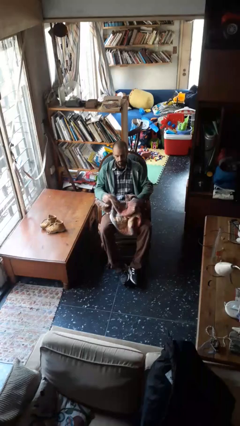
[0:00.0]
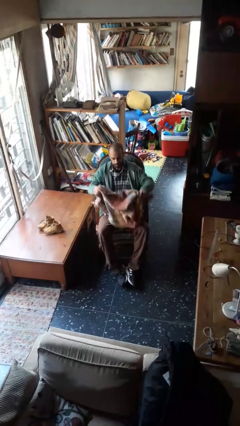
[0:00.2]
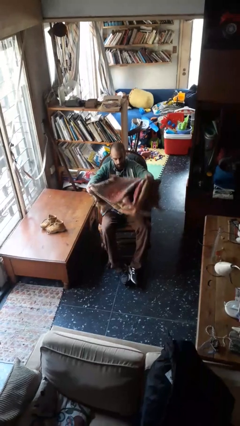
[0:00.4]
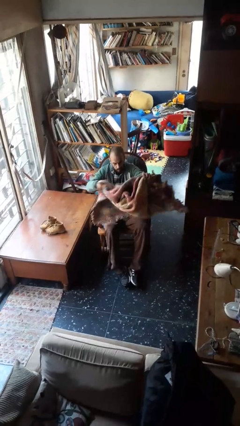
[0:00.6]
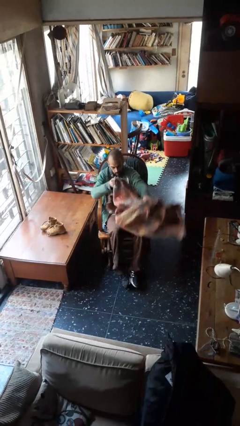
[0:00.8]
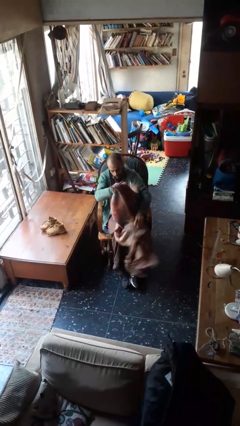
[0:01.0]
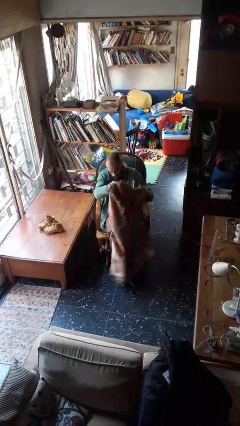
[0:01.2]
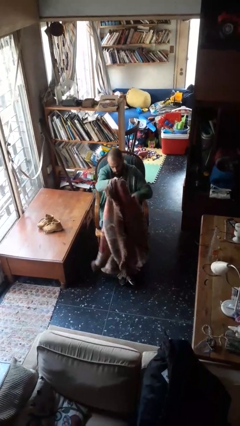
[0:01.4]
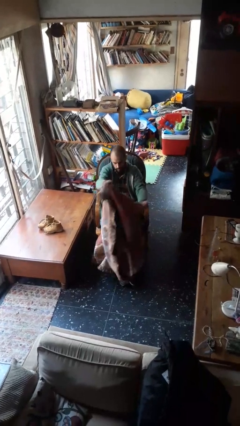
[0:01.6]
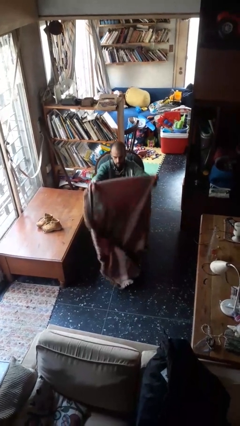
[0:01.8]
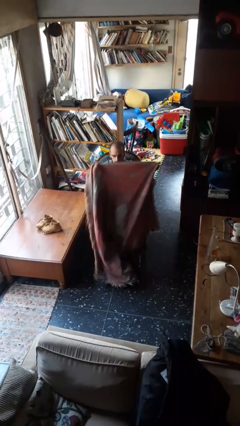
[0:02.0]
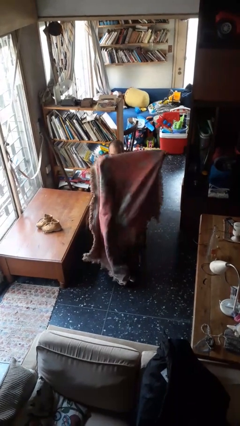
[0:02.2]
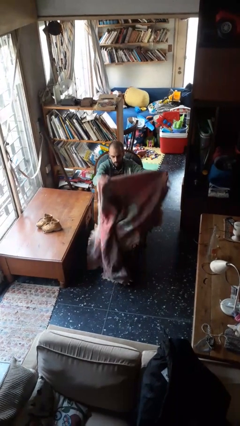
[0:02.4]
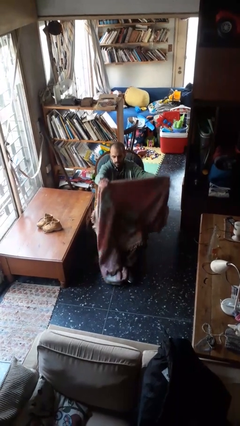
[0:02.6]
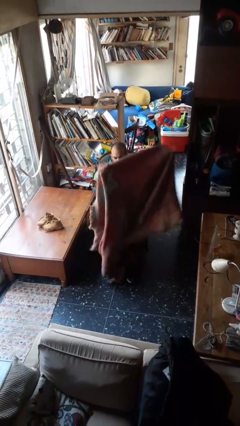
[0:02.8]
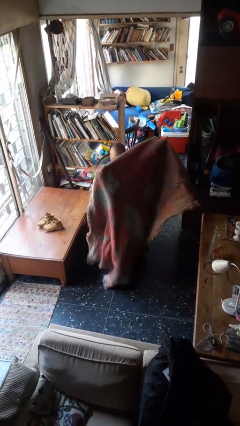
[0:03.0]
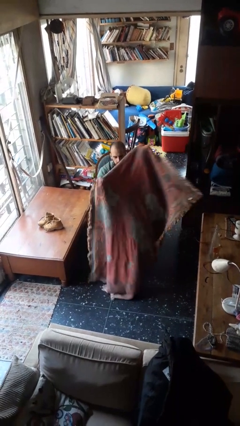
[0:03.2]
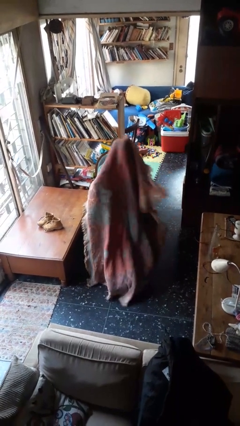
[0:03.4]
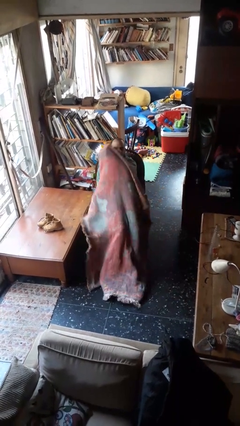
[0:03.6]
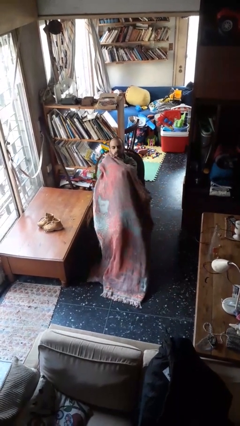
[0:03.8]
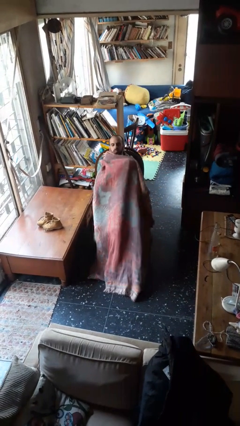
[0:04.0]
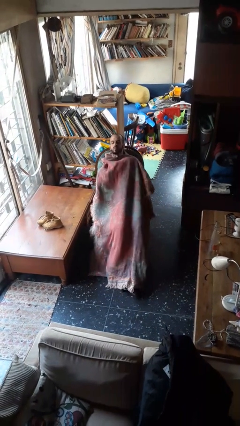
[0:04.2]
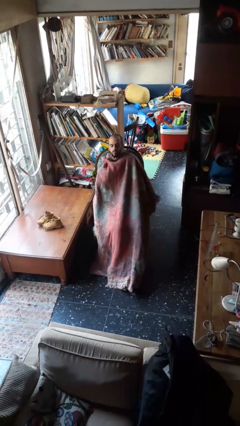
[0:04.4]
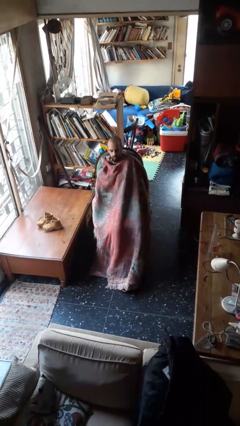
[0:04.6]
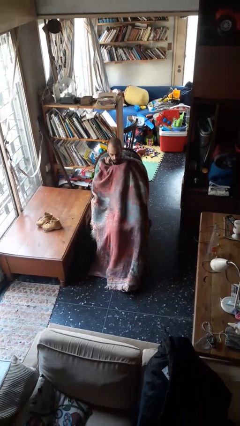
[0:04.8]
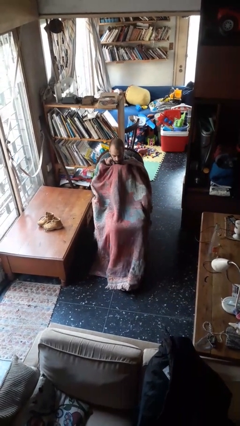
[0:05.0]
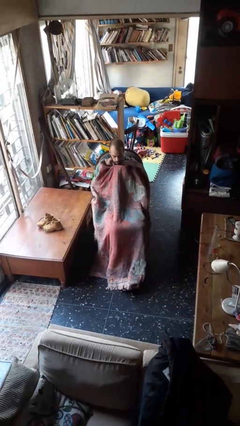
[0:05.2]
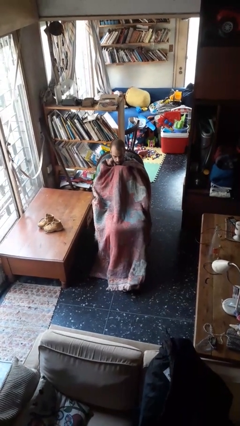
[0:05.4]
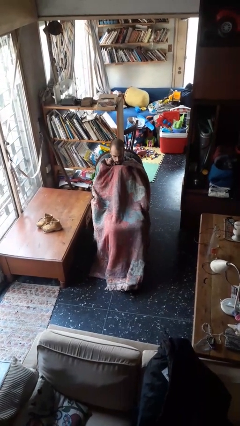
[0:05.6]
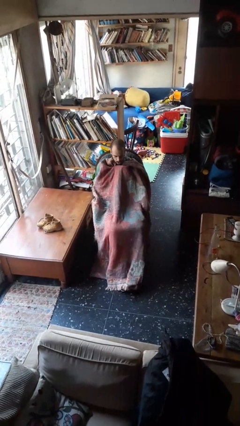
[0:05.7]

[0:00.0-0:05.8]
person covers with blanket

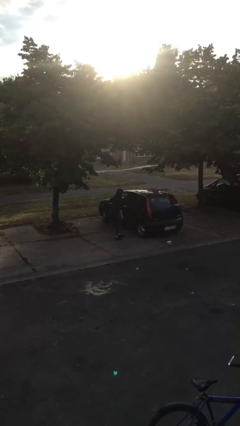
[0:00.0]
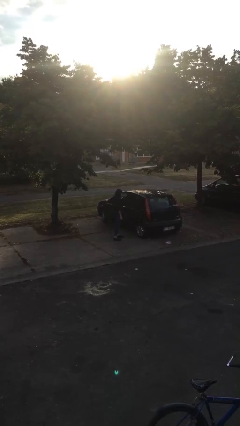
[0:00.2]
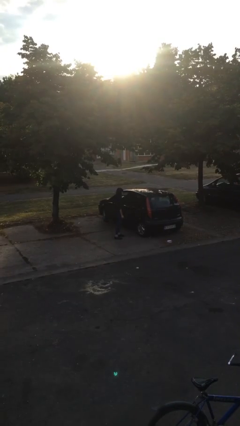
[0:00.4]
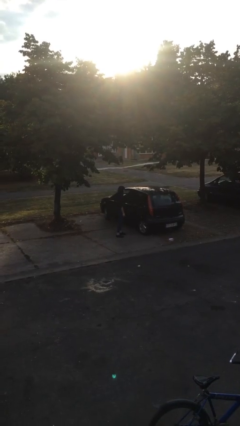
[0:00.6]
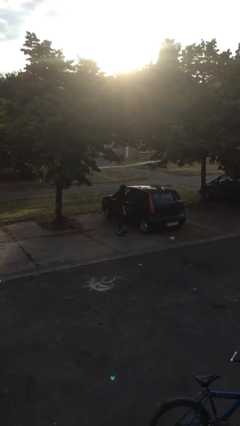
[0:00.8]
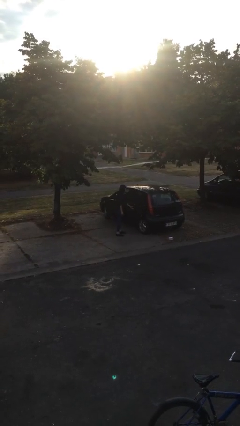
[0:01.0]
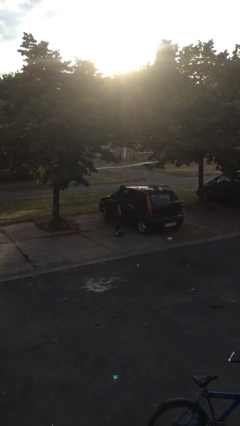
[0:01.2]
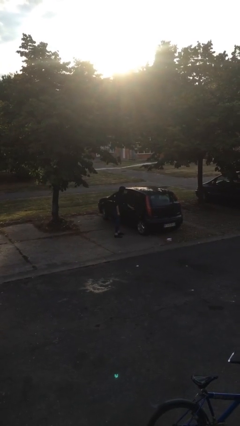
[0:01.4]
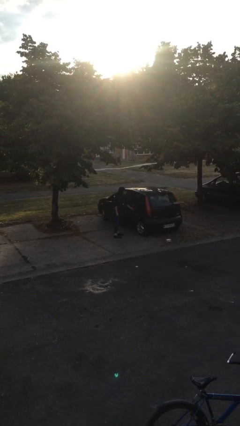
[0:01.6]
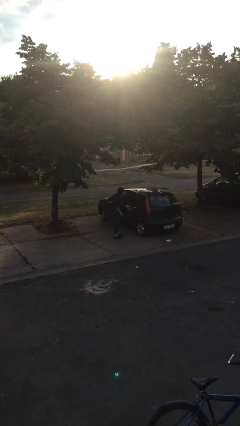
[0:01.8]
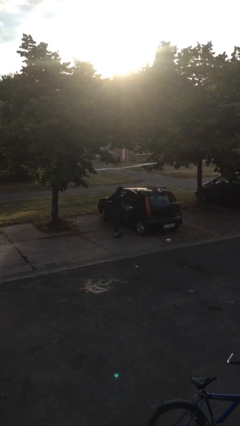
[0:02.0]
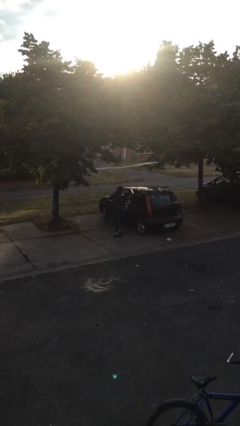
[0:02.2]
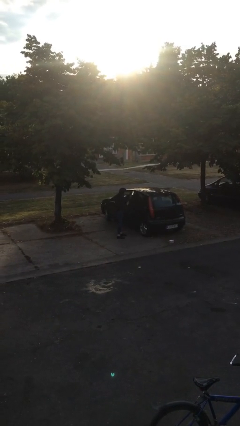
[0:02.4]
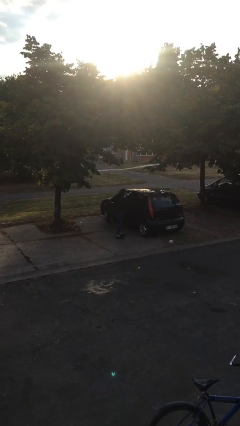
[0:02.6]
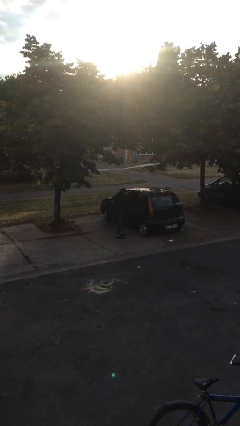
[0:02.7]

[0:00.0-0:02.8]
person opens car door

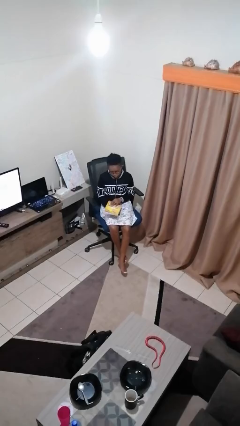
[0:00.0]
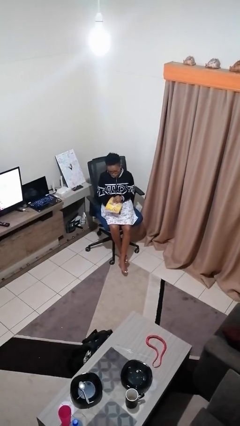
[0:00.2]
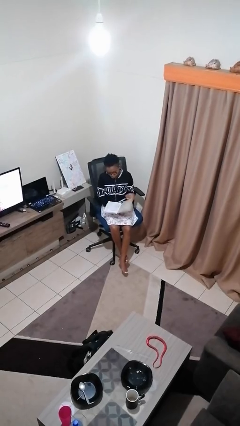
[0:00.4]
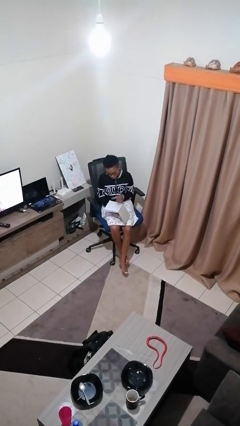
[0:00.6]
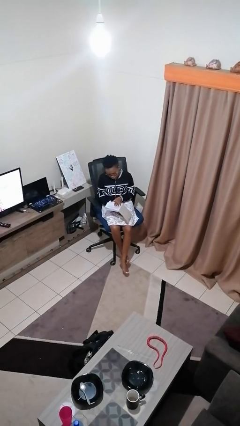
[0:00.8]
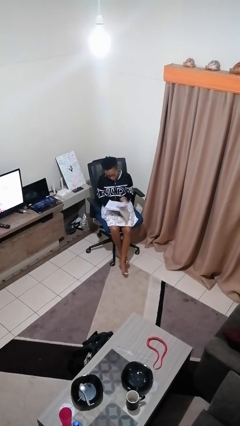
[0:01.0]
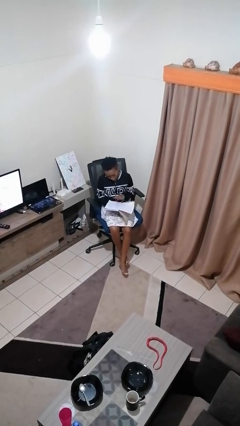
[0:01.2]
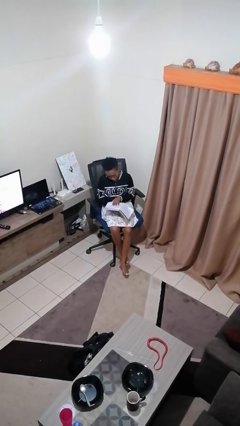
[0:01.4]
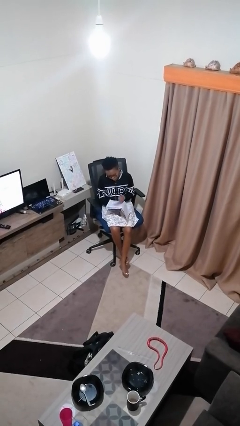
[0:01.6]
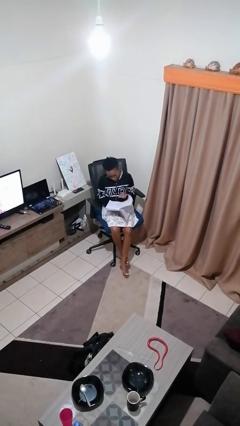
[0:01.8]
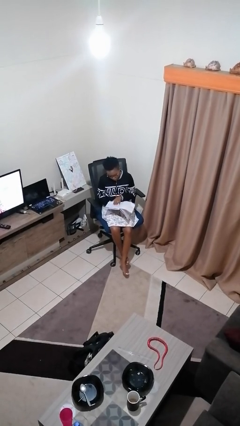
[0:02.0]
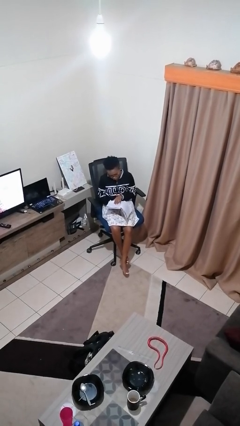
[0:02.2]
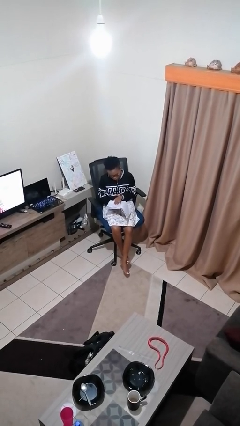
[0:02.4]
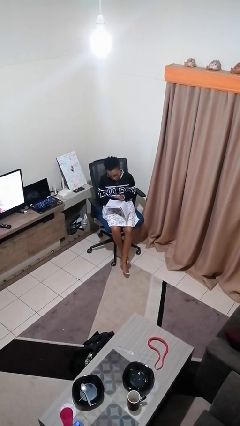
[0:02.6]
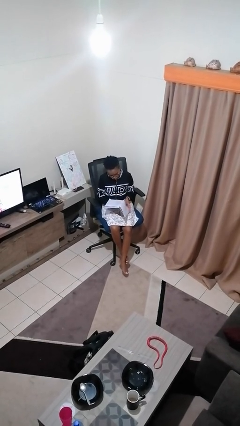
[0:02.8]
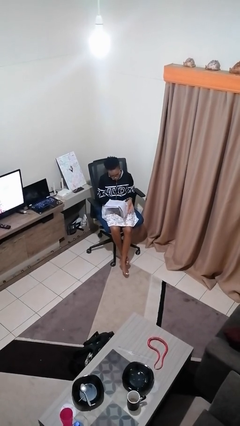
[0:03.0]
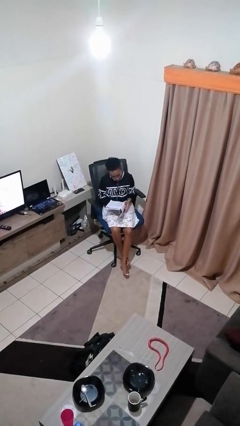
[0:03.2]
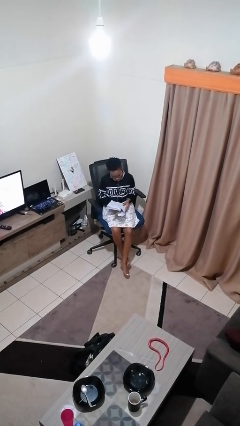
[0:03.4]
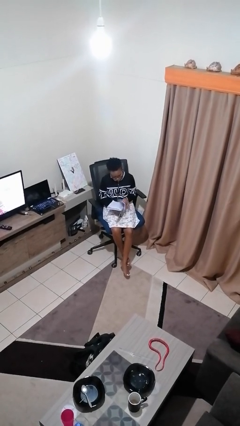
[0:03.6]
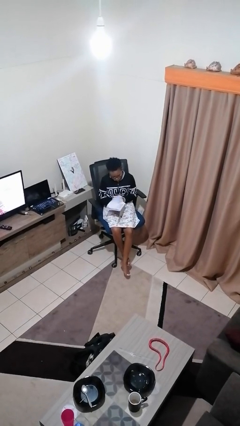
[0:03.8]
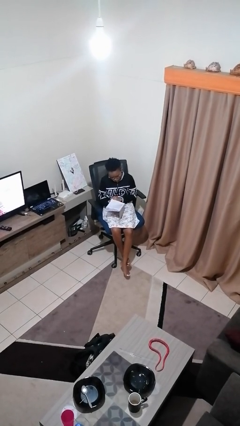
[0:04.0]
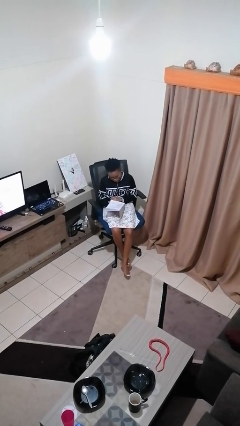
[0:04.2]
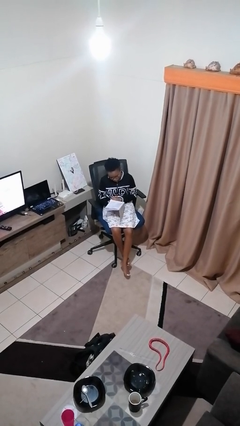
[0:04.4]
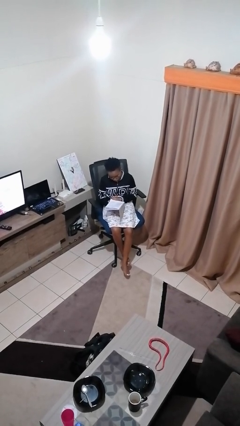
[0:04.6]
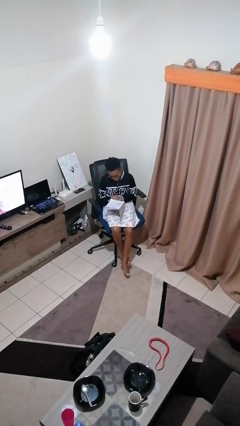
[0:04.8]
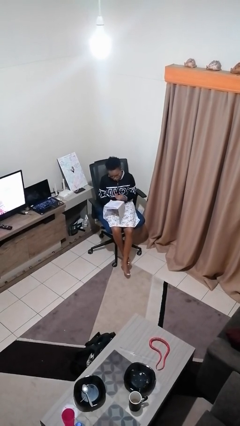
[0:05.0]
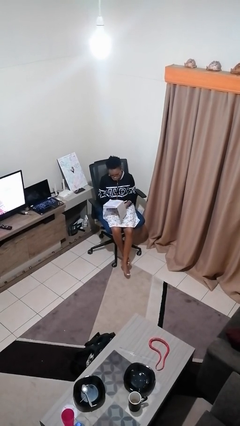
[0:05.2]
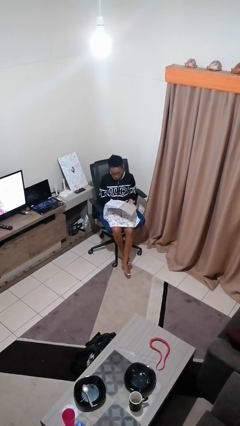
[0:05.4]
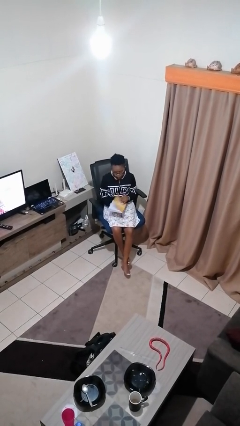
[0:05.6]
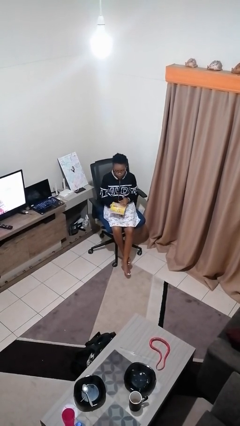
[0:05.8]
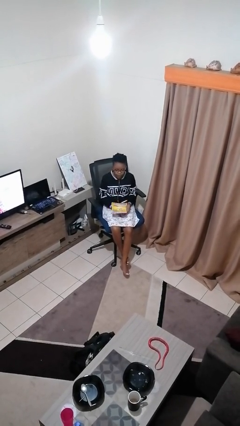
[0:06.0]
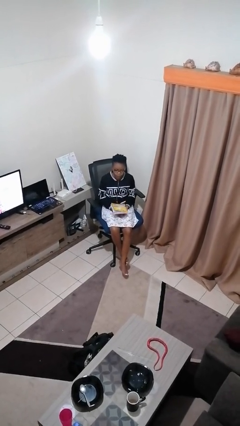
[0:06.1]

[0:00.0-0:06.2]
person reads book

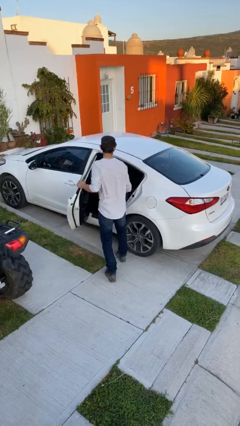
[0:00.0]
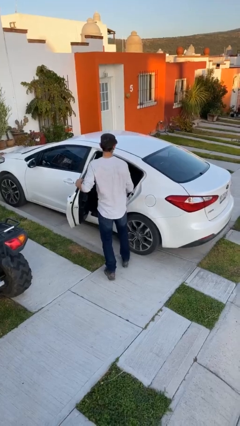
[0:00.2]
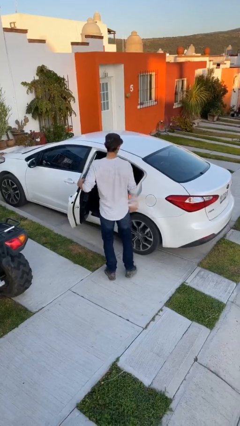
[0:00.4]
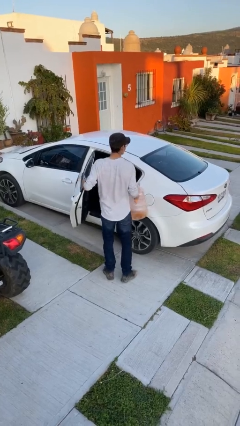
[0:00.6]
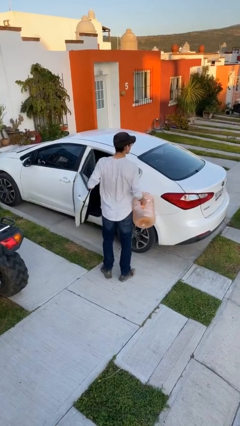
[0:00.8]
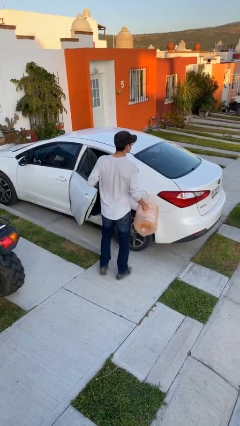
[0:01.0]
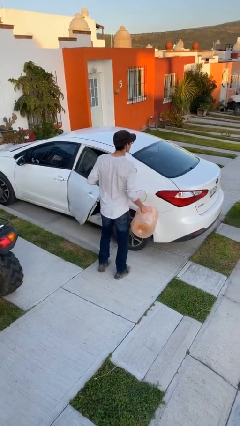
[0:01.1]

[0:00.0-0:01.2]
person unloads car

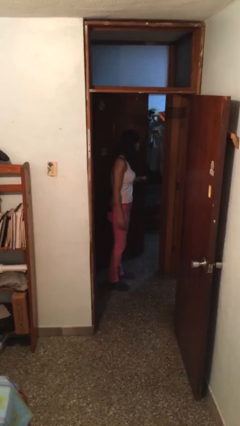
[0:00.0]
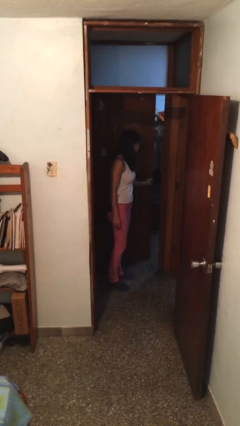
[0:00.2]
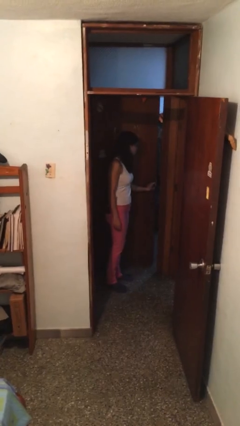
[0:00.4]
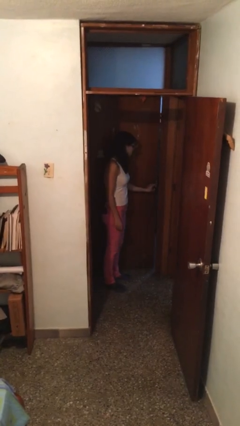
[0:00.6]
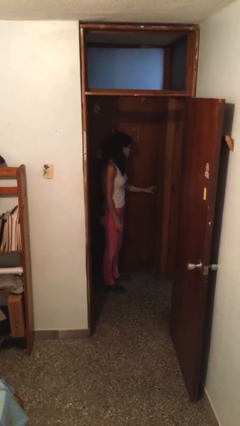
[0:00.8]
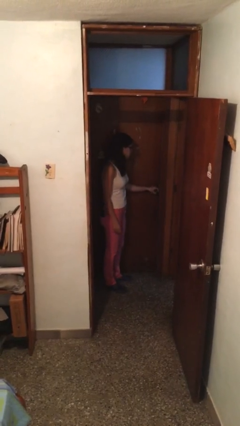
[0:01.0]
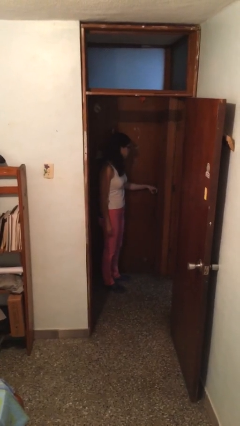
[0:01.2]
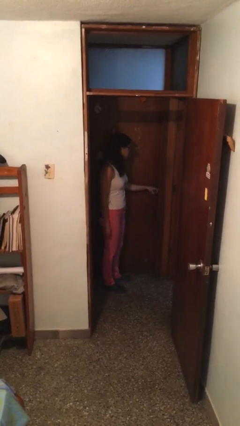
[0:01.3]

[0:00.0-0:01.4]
person closes facility door
